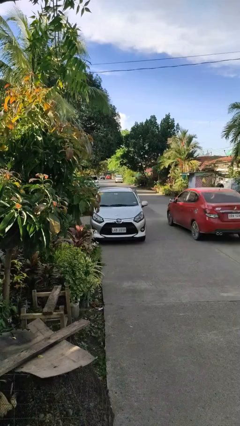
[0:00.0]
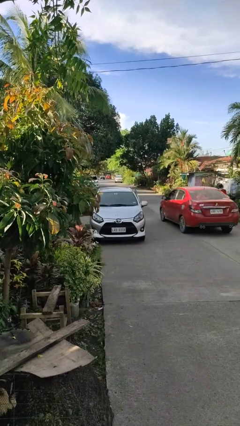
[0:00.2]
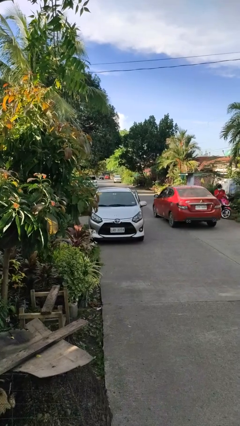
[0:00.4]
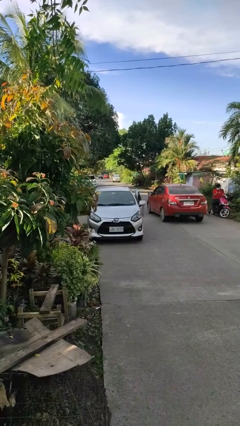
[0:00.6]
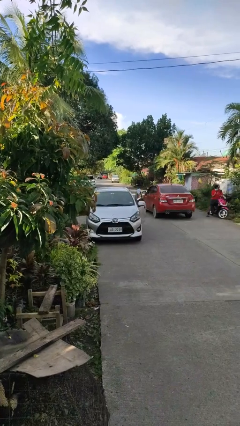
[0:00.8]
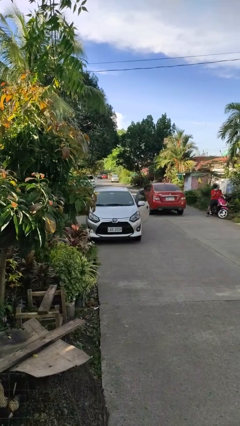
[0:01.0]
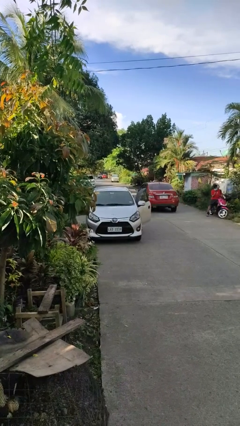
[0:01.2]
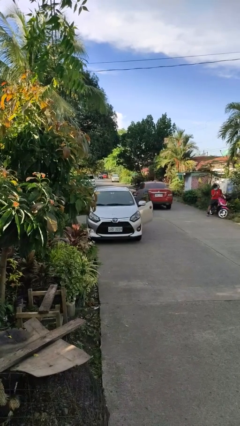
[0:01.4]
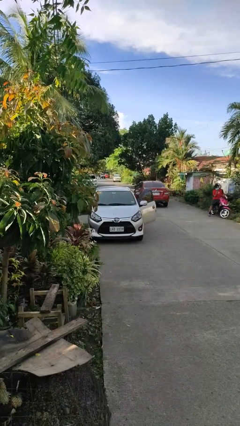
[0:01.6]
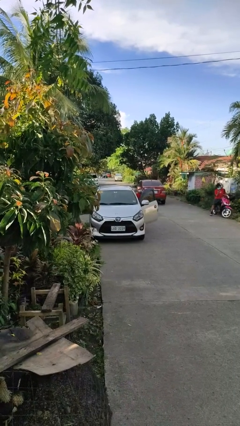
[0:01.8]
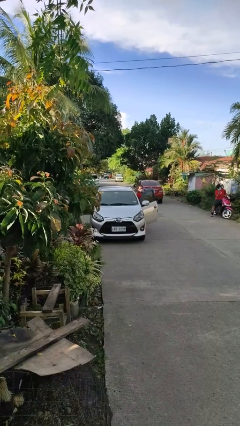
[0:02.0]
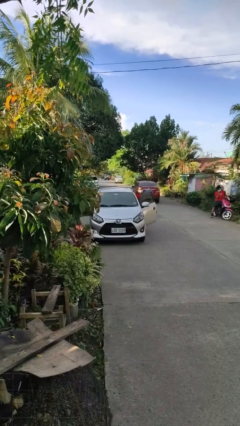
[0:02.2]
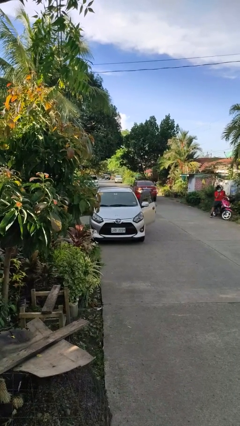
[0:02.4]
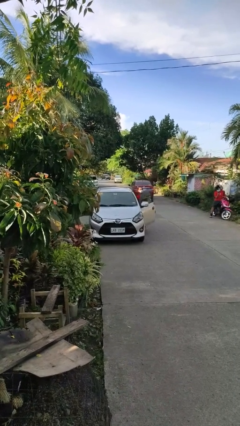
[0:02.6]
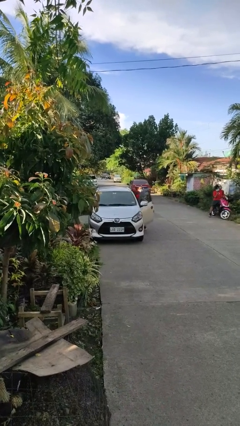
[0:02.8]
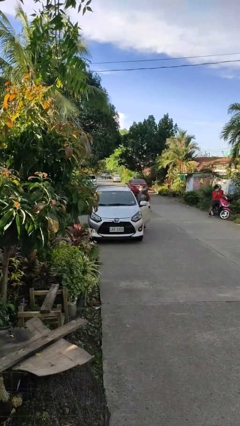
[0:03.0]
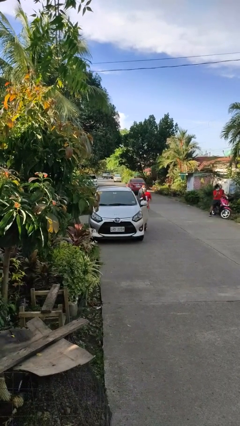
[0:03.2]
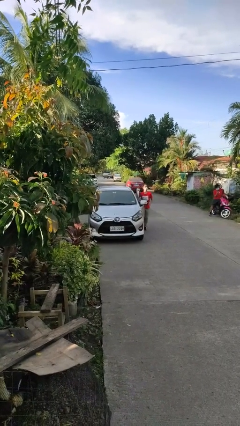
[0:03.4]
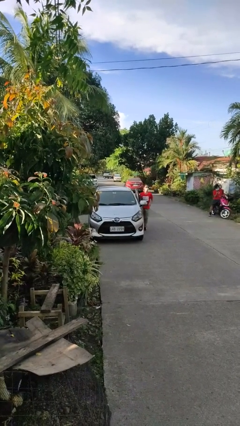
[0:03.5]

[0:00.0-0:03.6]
car drops off person

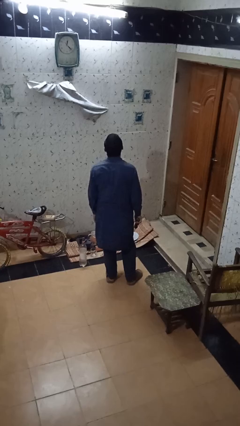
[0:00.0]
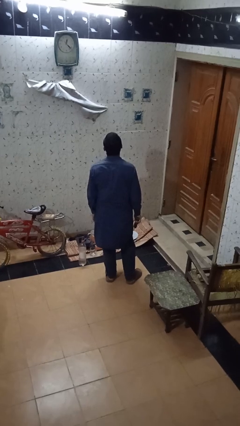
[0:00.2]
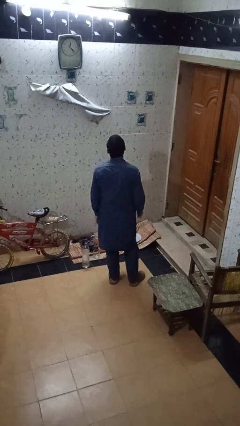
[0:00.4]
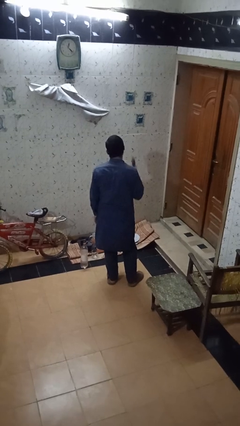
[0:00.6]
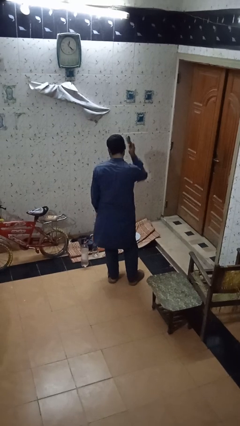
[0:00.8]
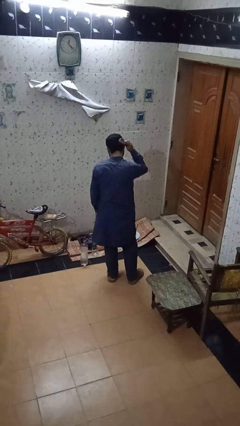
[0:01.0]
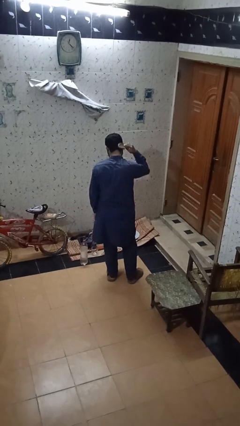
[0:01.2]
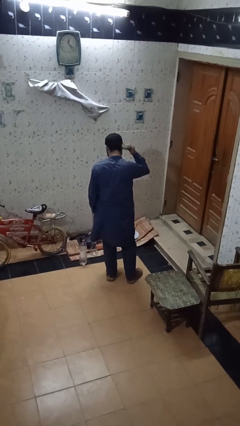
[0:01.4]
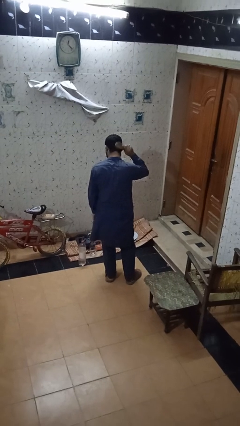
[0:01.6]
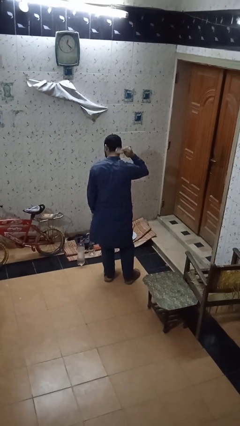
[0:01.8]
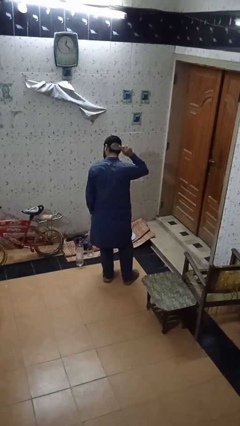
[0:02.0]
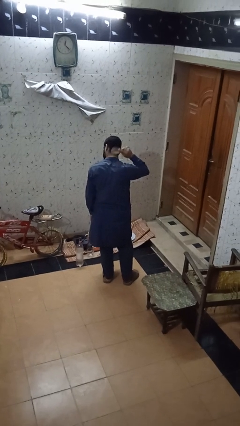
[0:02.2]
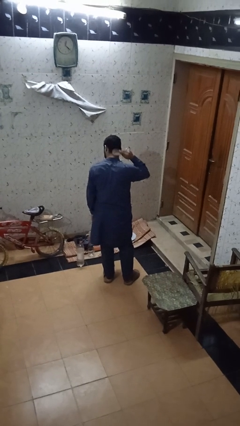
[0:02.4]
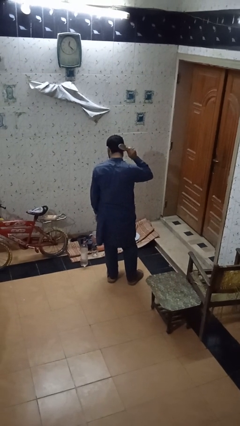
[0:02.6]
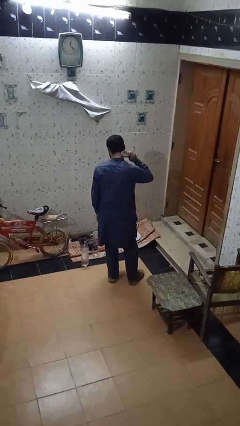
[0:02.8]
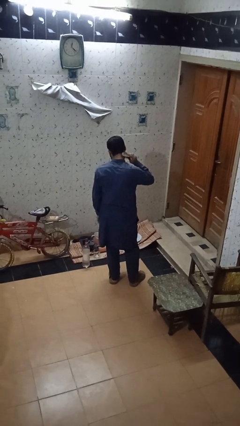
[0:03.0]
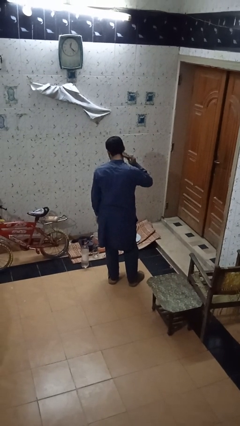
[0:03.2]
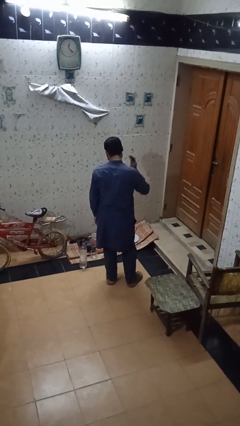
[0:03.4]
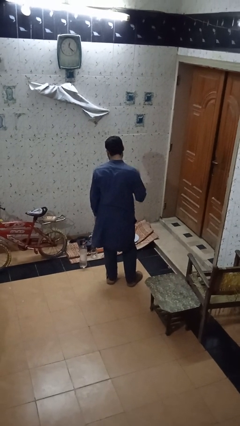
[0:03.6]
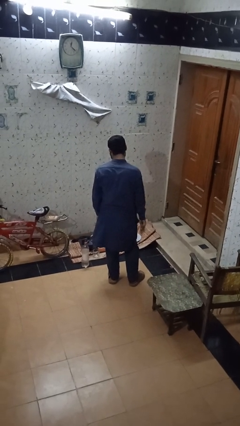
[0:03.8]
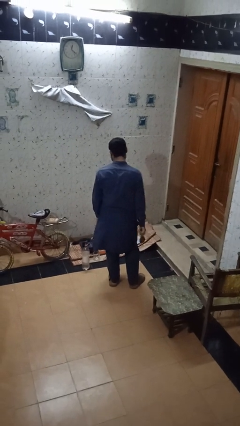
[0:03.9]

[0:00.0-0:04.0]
person brushes hair

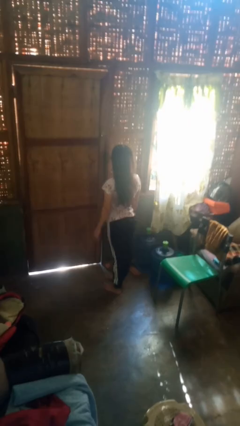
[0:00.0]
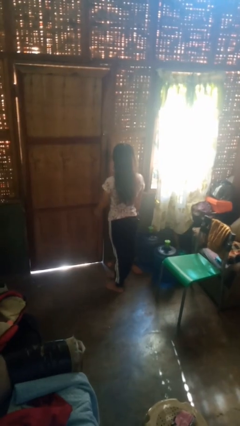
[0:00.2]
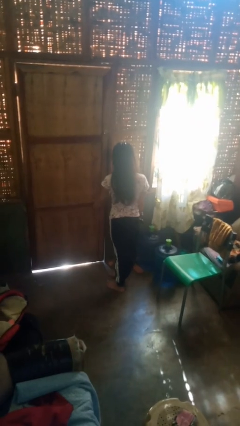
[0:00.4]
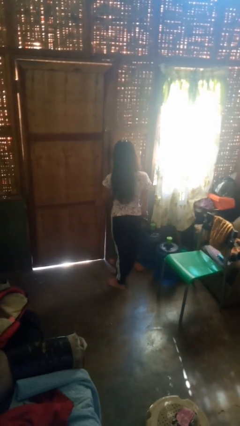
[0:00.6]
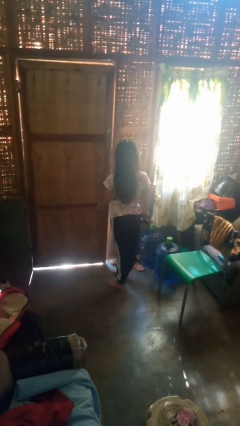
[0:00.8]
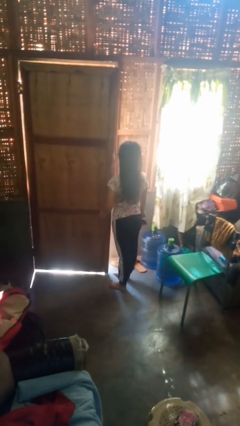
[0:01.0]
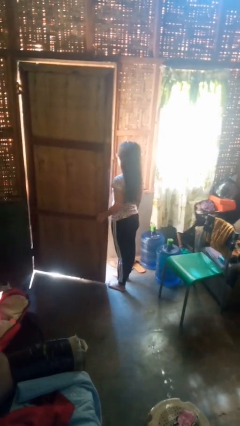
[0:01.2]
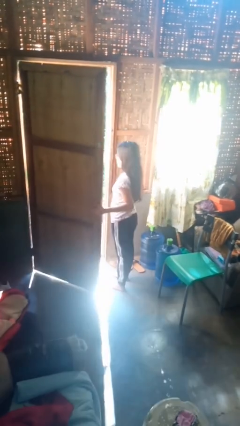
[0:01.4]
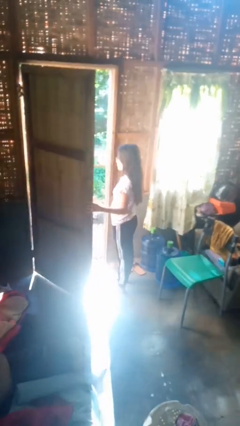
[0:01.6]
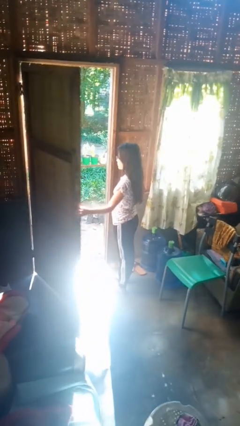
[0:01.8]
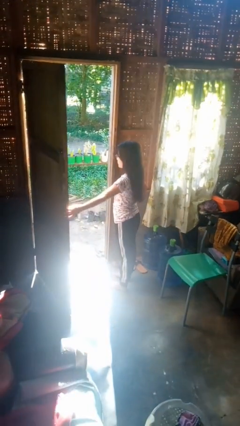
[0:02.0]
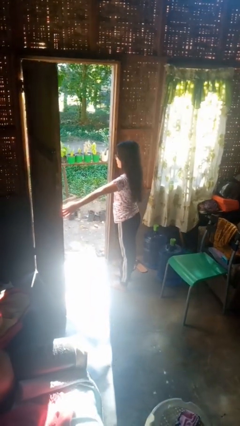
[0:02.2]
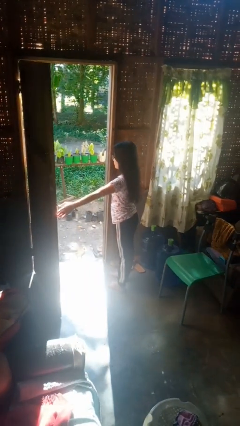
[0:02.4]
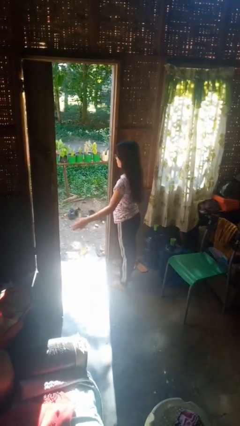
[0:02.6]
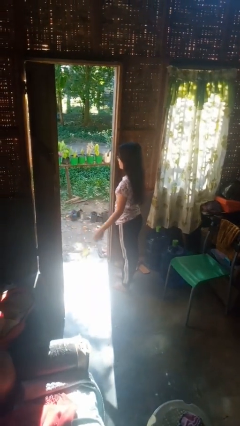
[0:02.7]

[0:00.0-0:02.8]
person opens facility door

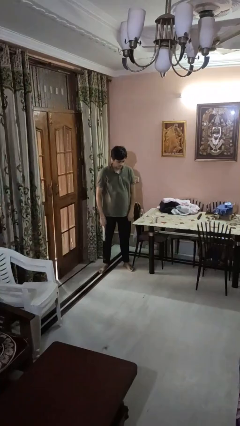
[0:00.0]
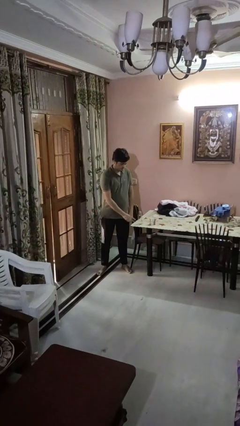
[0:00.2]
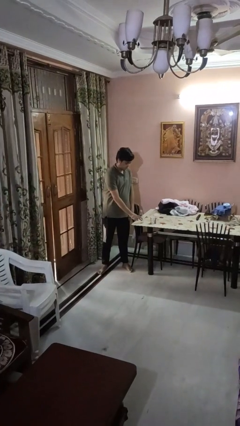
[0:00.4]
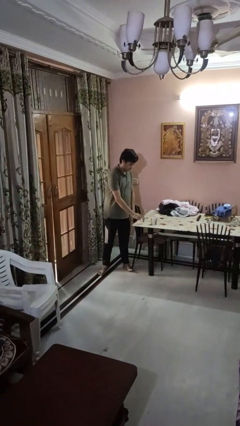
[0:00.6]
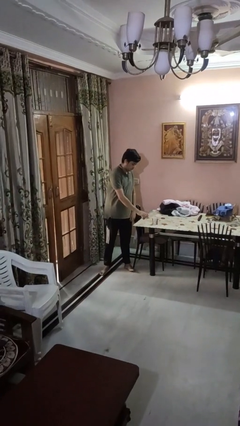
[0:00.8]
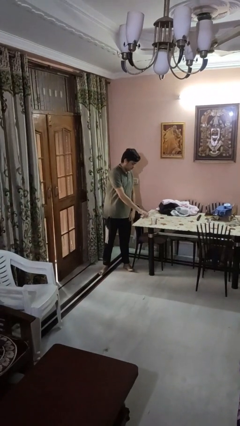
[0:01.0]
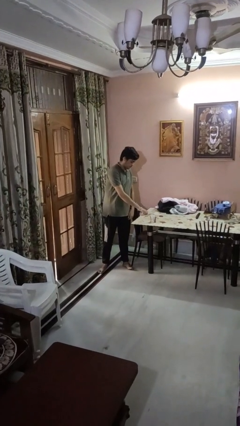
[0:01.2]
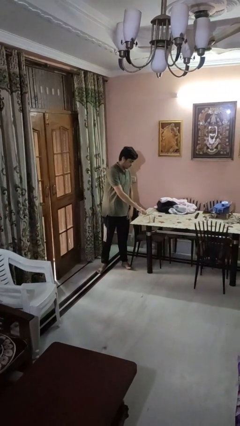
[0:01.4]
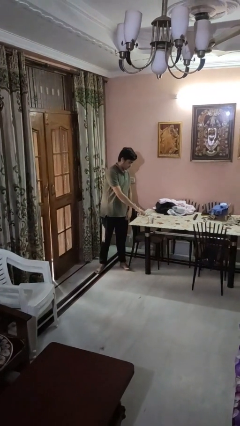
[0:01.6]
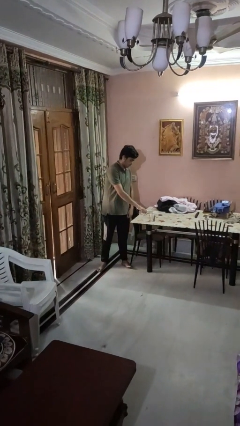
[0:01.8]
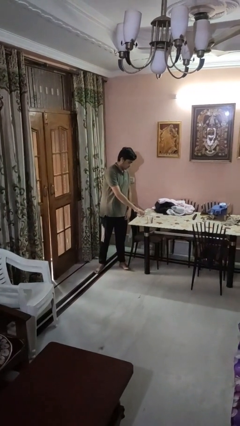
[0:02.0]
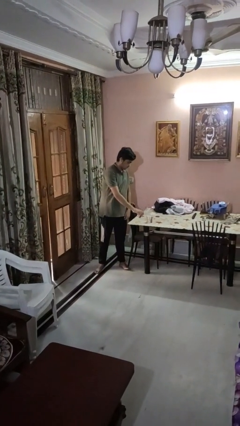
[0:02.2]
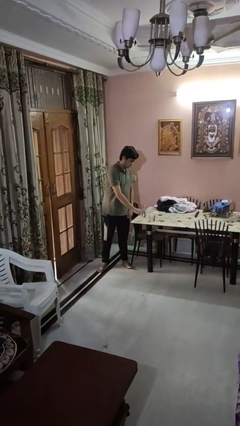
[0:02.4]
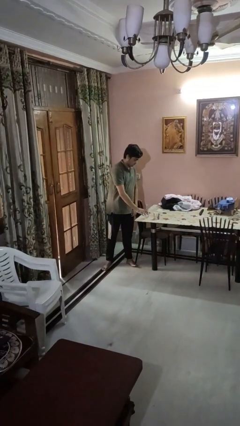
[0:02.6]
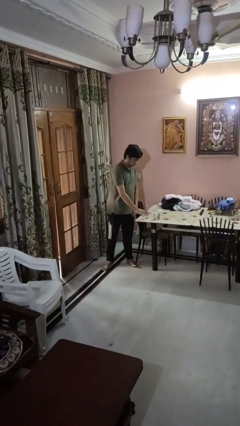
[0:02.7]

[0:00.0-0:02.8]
person pours liquid into cup

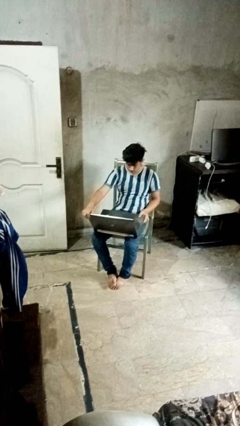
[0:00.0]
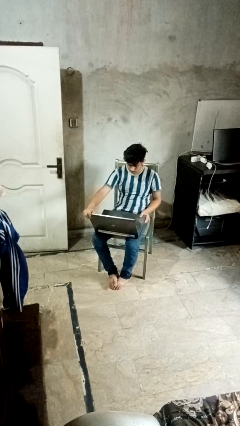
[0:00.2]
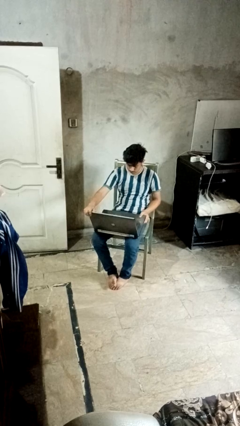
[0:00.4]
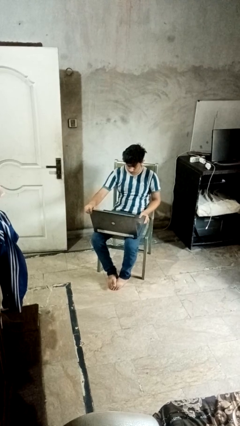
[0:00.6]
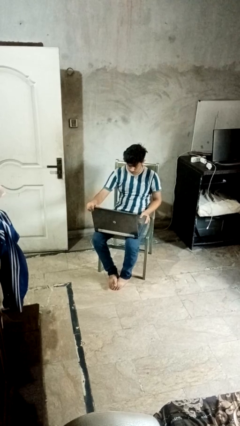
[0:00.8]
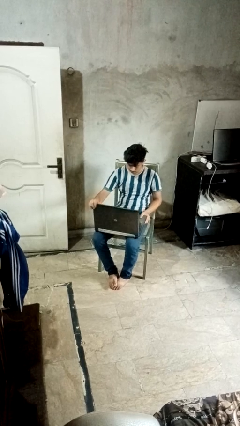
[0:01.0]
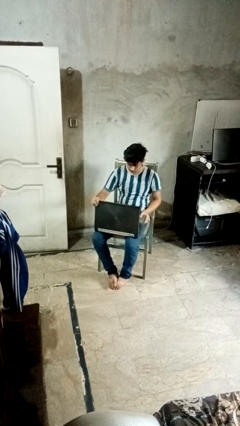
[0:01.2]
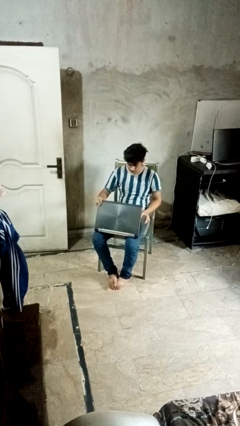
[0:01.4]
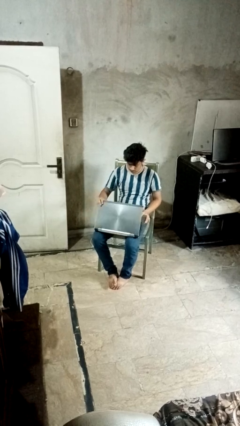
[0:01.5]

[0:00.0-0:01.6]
person closes laptop

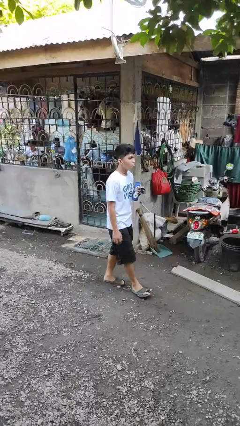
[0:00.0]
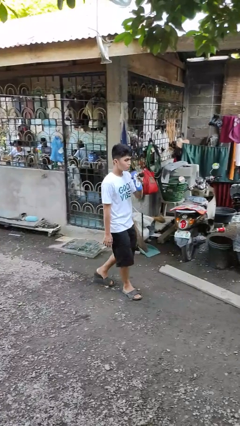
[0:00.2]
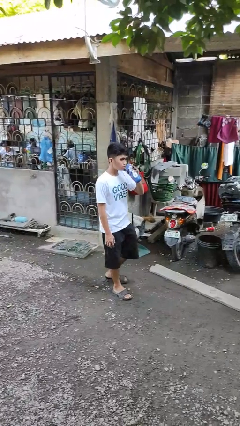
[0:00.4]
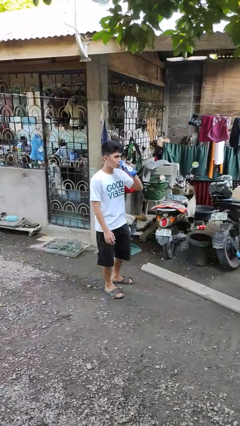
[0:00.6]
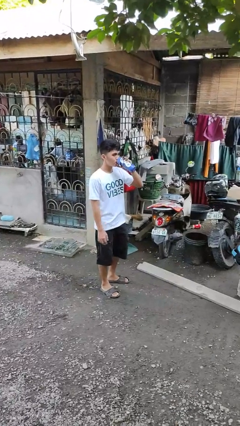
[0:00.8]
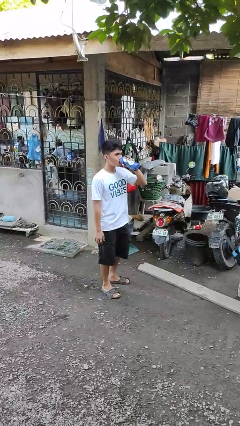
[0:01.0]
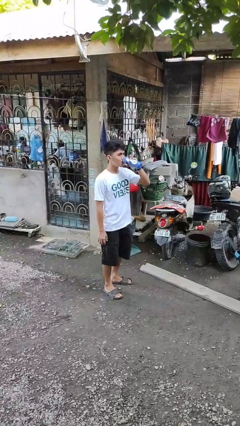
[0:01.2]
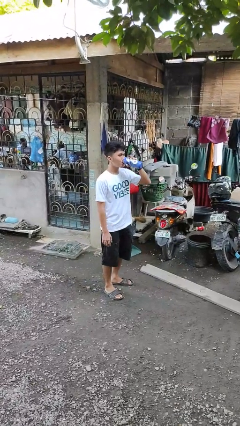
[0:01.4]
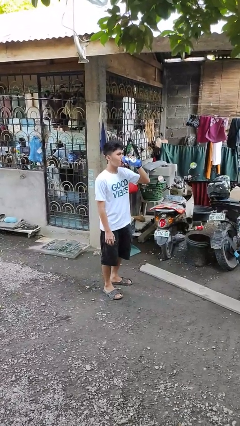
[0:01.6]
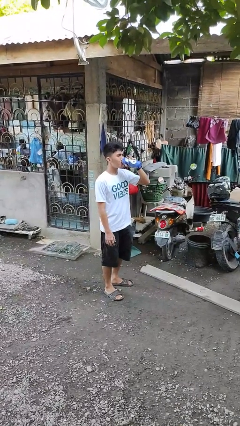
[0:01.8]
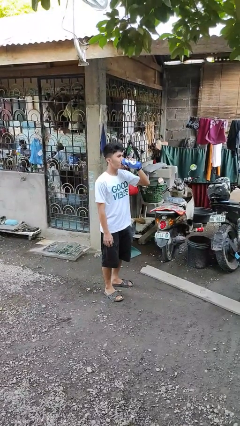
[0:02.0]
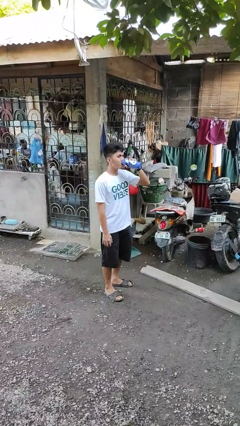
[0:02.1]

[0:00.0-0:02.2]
person drinks from bottle

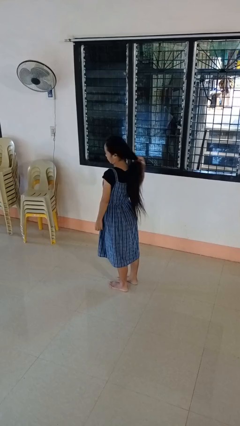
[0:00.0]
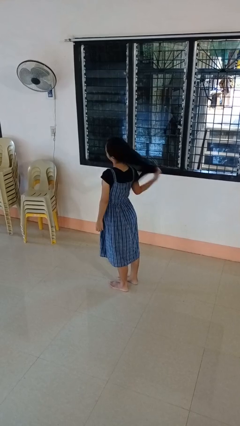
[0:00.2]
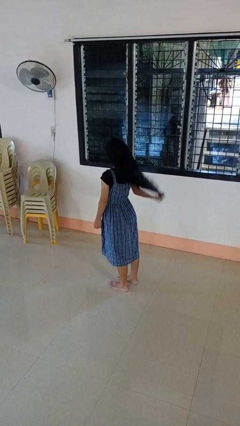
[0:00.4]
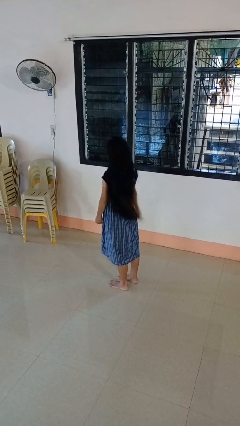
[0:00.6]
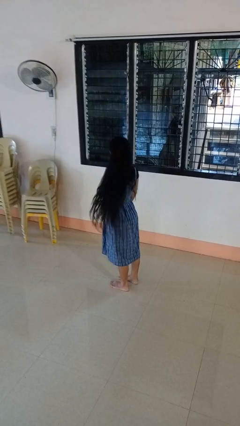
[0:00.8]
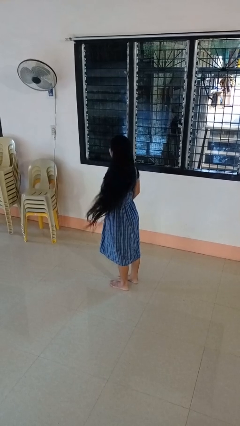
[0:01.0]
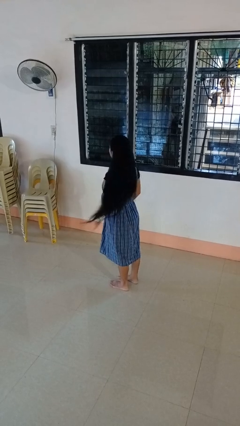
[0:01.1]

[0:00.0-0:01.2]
person takes off hairtie
